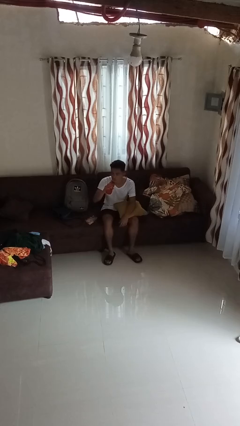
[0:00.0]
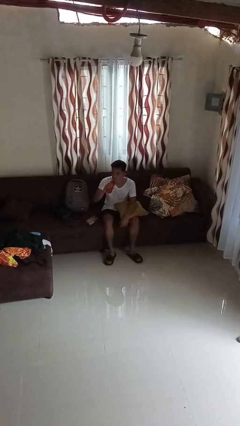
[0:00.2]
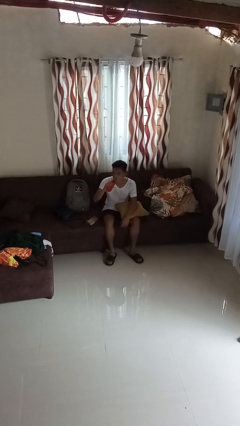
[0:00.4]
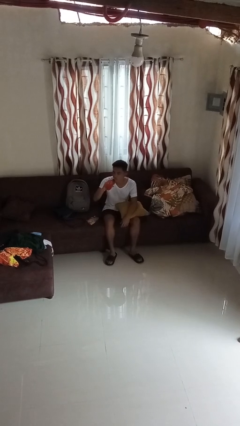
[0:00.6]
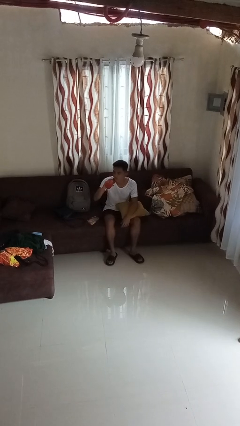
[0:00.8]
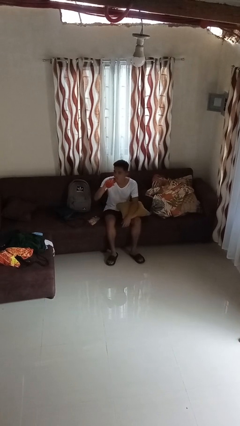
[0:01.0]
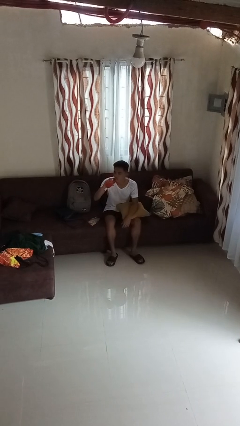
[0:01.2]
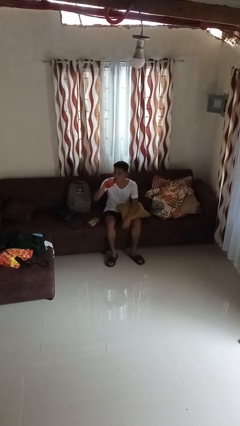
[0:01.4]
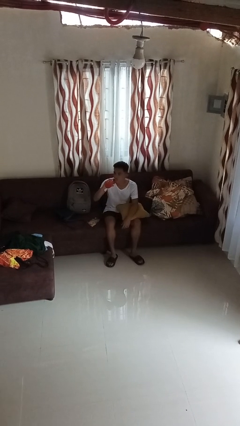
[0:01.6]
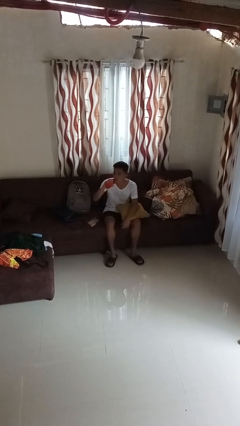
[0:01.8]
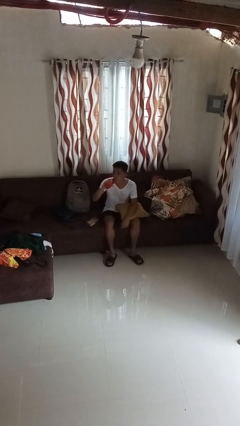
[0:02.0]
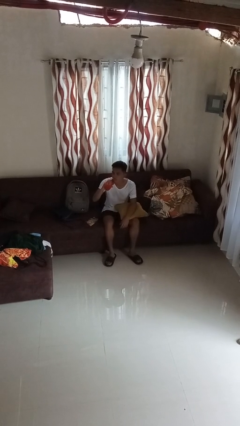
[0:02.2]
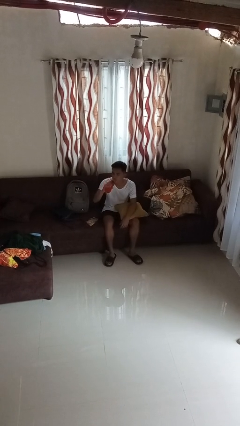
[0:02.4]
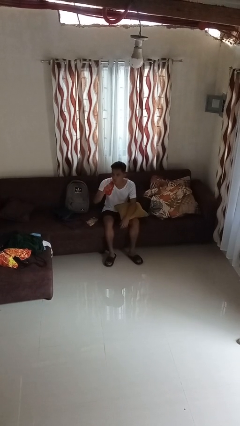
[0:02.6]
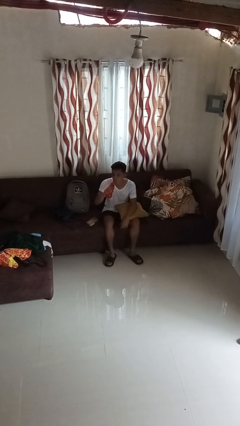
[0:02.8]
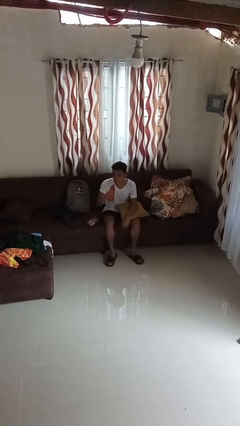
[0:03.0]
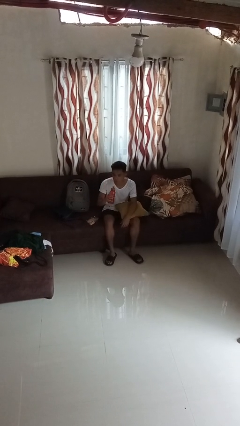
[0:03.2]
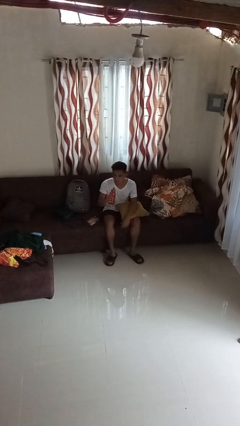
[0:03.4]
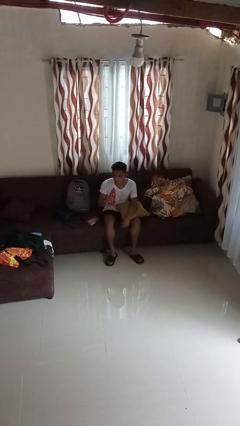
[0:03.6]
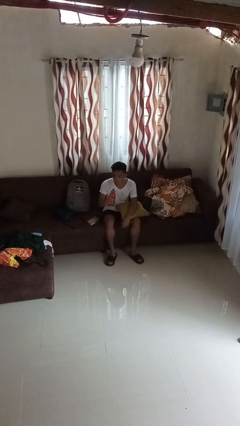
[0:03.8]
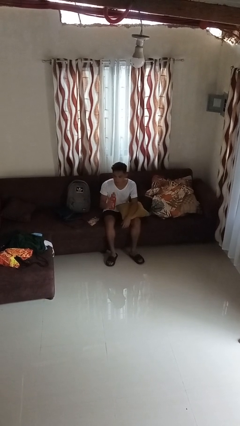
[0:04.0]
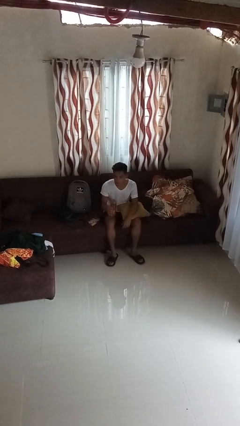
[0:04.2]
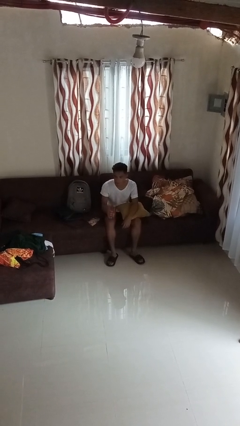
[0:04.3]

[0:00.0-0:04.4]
person drinks from bottle

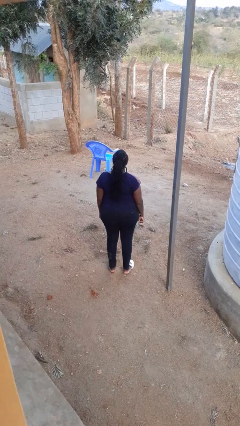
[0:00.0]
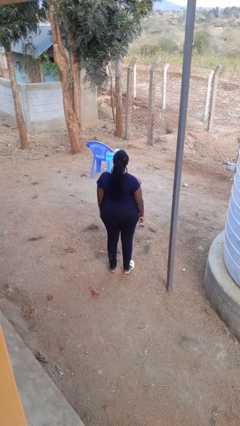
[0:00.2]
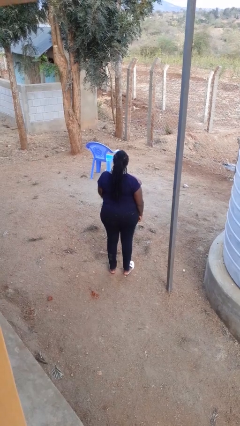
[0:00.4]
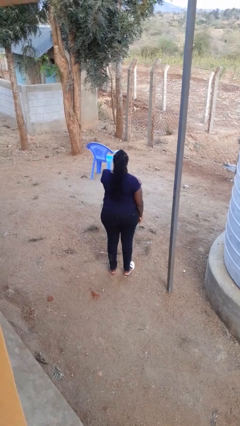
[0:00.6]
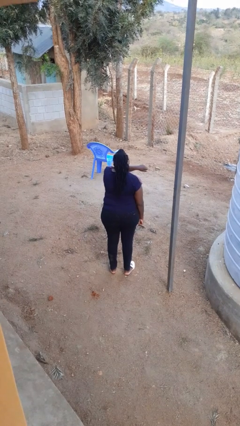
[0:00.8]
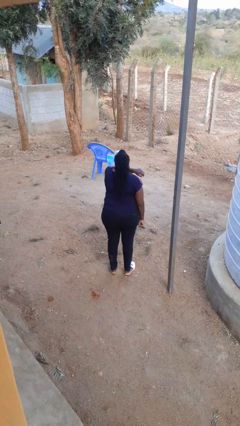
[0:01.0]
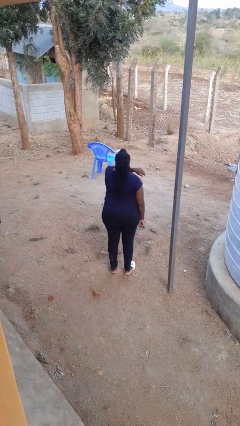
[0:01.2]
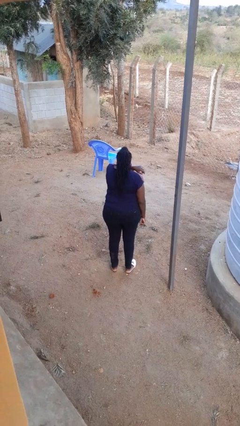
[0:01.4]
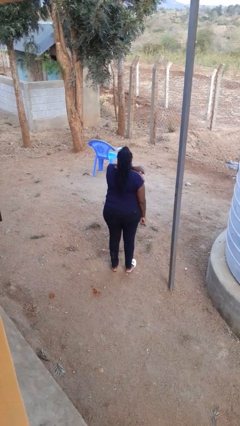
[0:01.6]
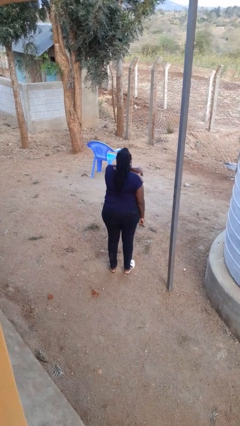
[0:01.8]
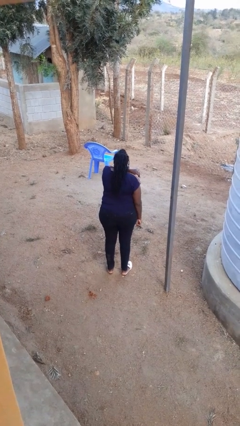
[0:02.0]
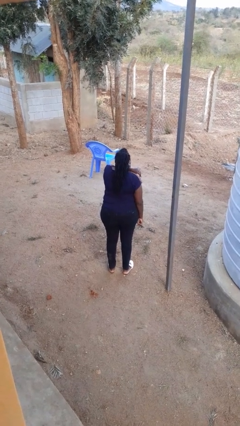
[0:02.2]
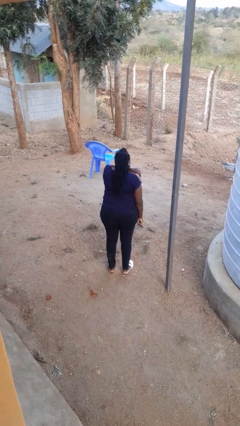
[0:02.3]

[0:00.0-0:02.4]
person sneezes into arm

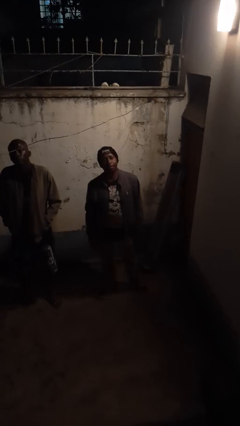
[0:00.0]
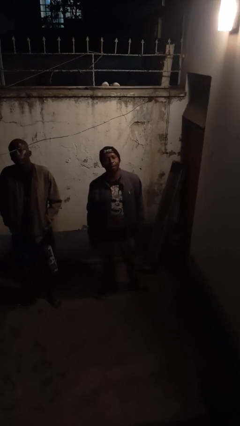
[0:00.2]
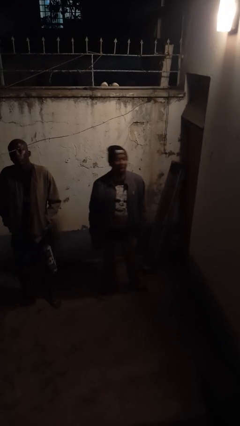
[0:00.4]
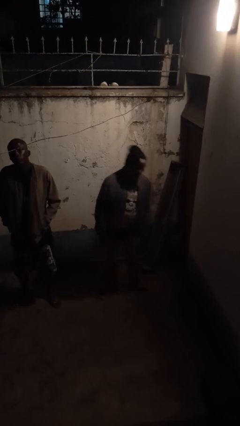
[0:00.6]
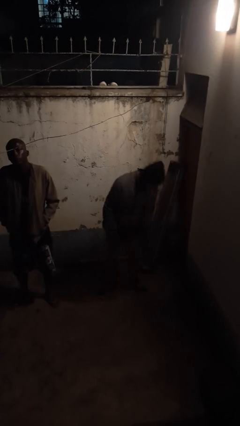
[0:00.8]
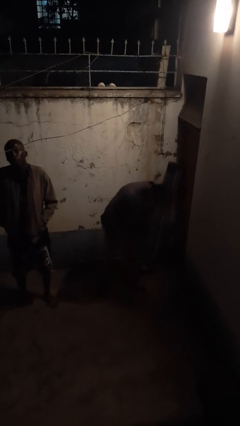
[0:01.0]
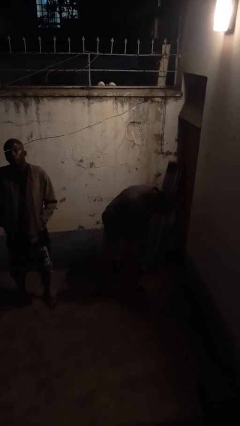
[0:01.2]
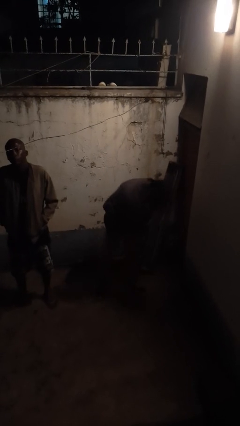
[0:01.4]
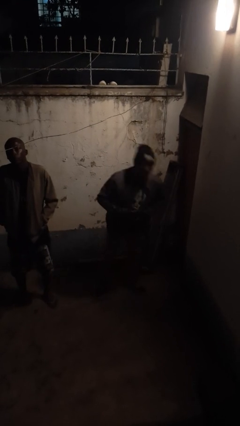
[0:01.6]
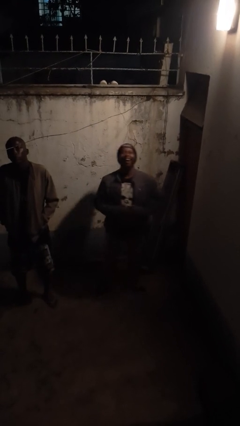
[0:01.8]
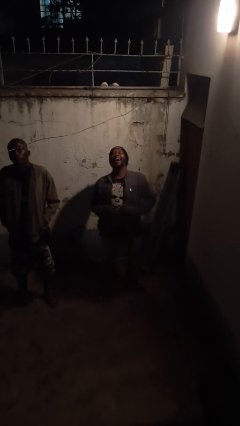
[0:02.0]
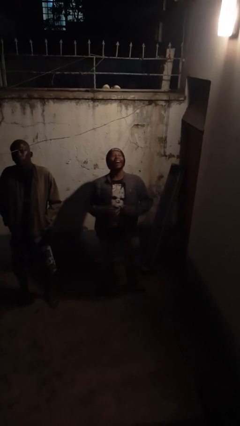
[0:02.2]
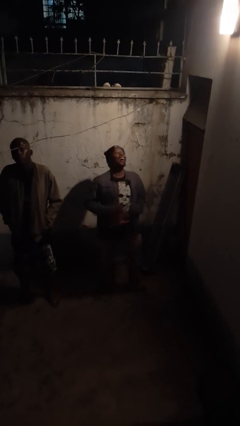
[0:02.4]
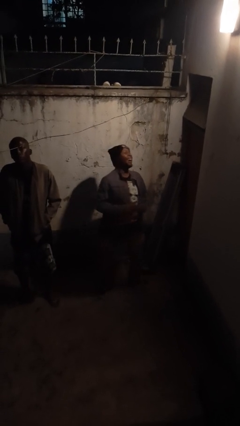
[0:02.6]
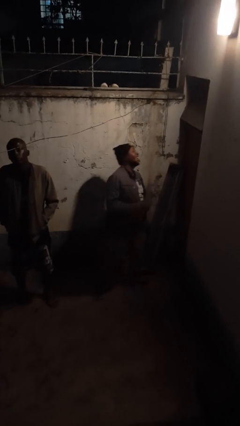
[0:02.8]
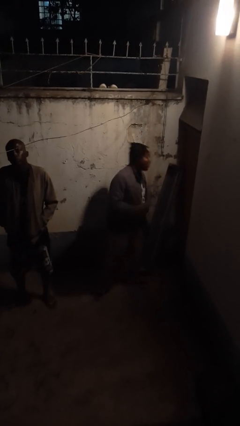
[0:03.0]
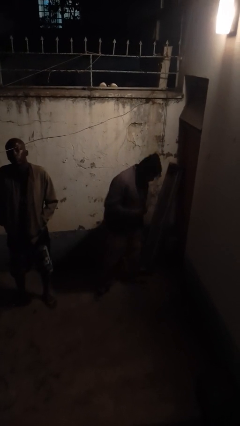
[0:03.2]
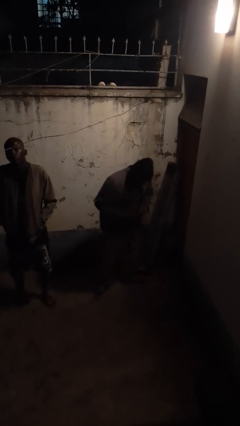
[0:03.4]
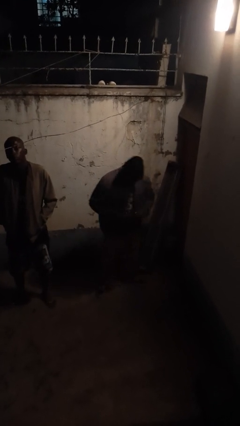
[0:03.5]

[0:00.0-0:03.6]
person laughs with person

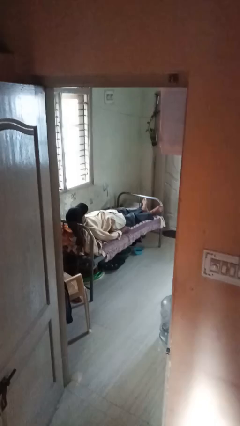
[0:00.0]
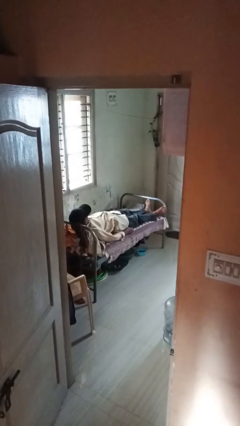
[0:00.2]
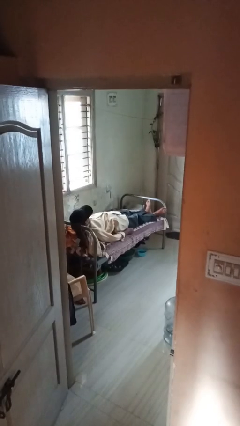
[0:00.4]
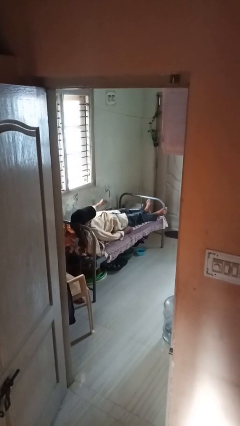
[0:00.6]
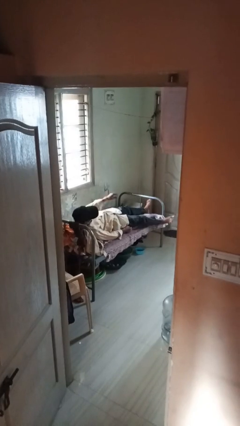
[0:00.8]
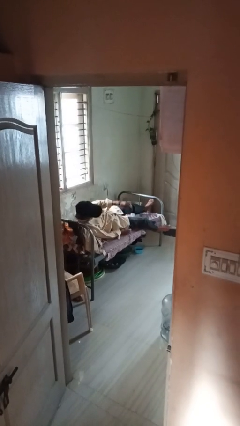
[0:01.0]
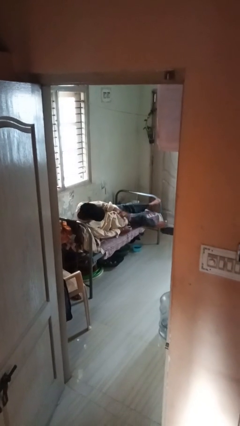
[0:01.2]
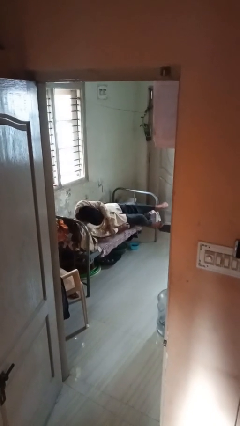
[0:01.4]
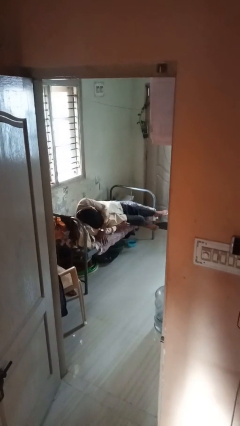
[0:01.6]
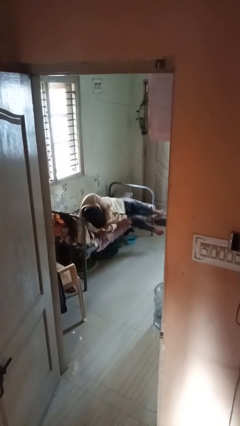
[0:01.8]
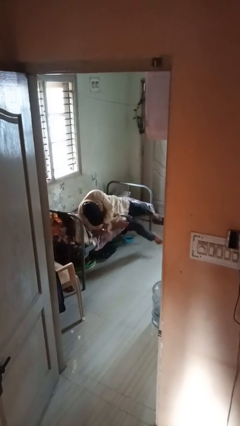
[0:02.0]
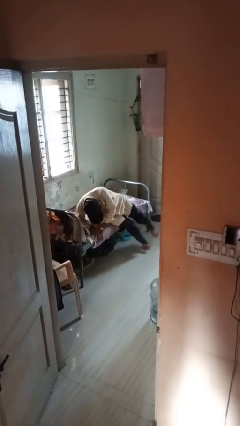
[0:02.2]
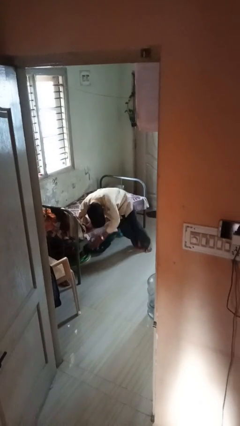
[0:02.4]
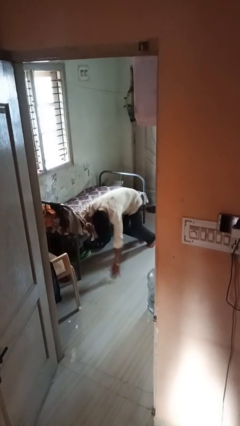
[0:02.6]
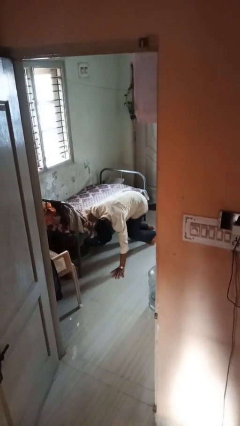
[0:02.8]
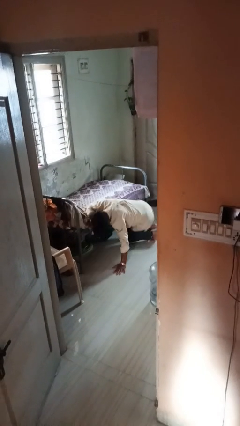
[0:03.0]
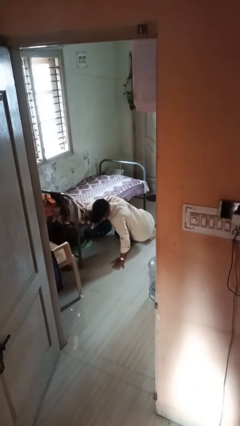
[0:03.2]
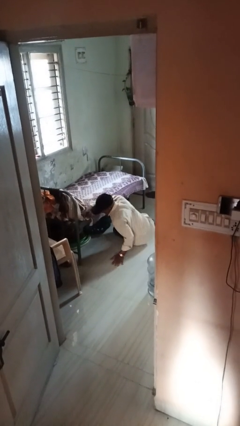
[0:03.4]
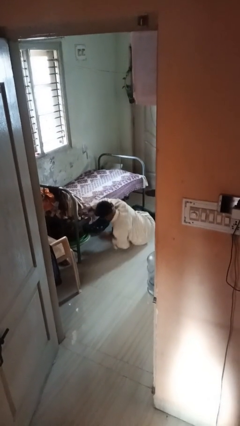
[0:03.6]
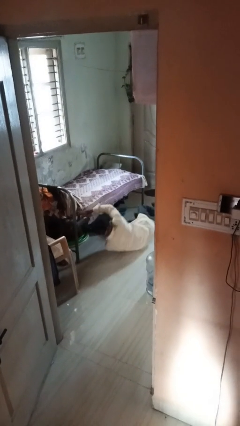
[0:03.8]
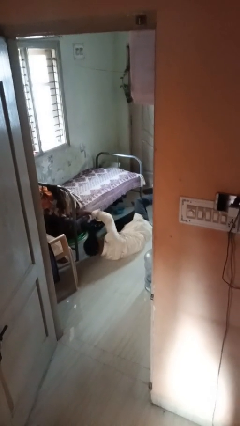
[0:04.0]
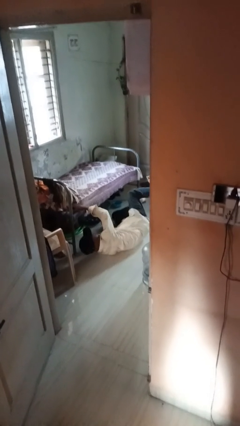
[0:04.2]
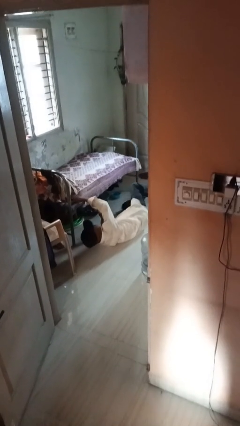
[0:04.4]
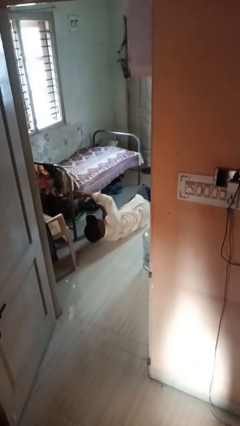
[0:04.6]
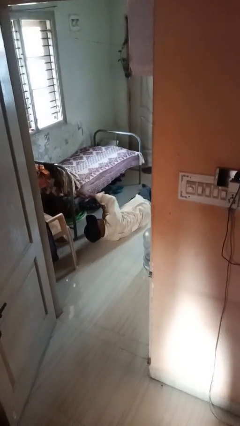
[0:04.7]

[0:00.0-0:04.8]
person falls from bed

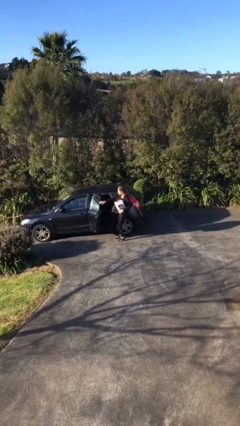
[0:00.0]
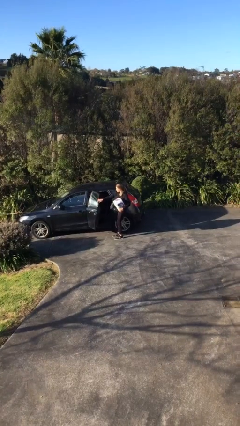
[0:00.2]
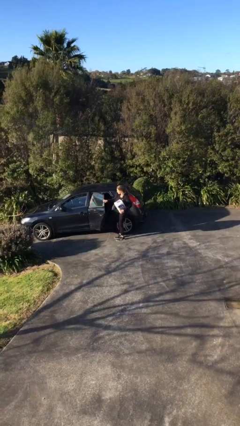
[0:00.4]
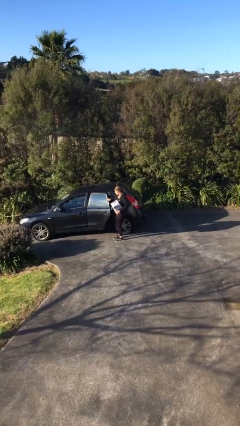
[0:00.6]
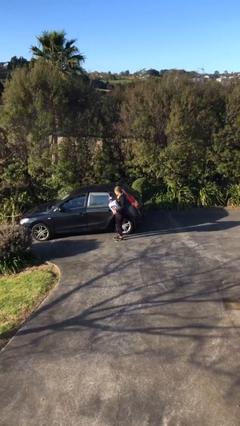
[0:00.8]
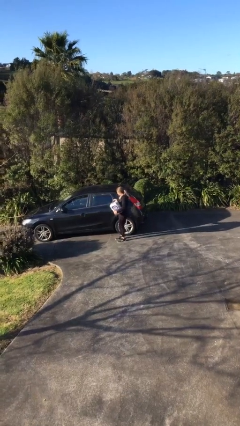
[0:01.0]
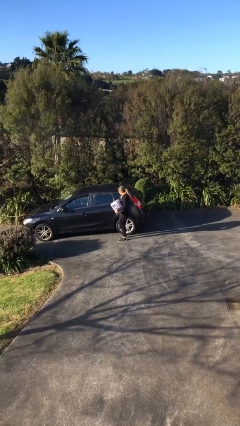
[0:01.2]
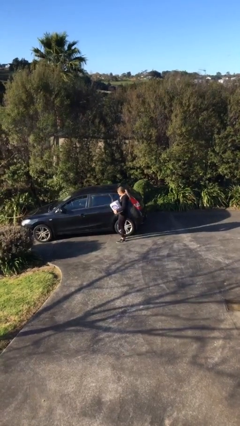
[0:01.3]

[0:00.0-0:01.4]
person closes car door

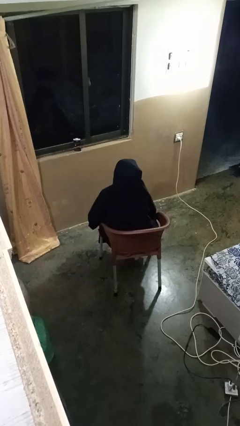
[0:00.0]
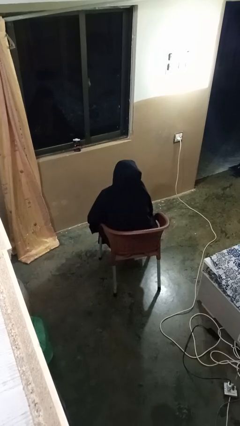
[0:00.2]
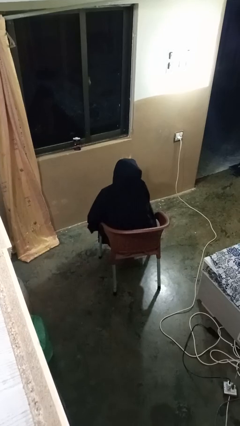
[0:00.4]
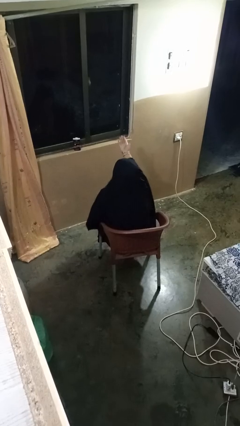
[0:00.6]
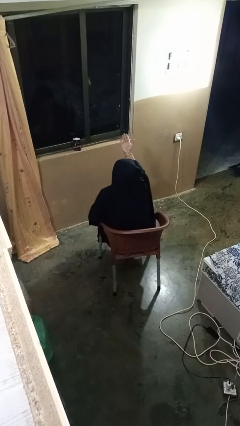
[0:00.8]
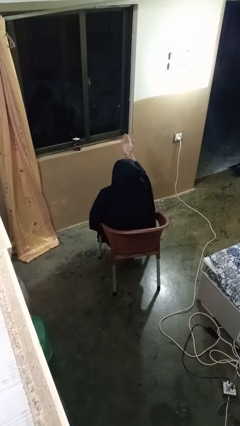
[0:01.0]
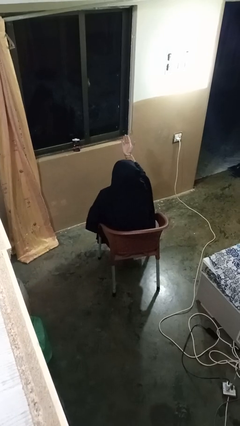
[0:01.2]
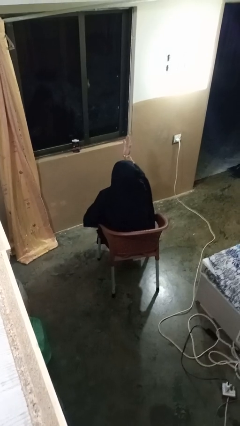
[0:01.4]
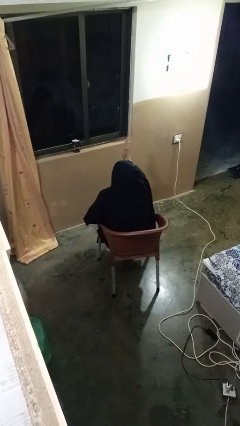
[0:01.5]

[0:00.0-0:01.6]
person gestures swipe up
